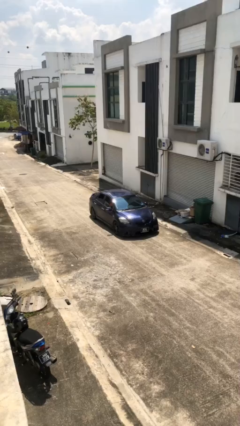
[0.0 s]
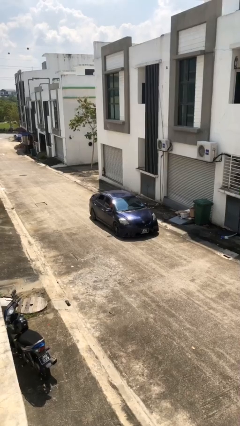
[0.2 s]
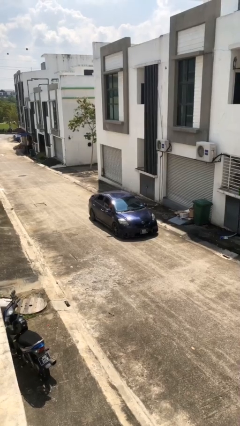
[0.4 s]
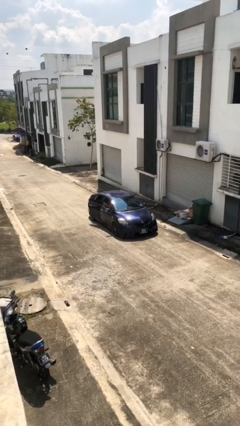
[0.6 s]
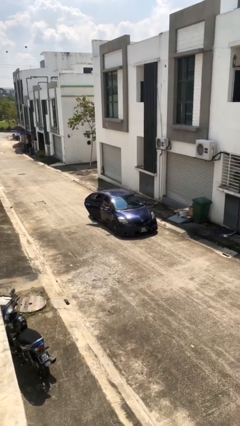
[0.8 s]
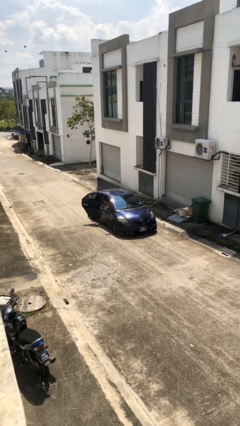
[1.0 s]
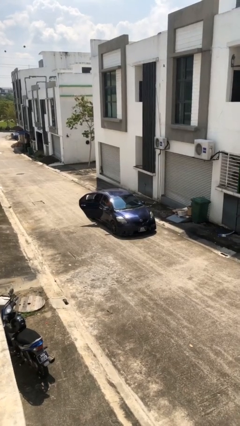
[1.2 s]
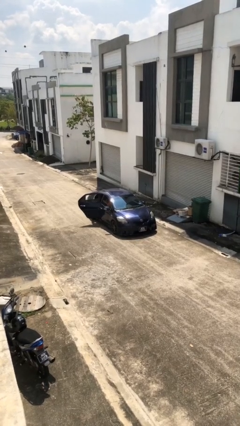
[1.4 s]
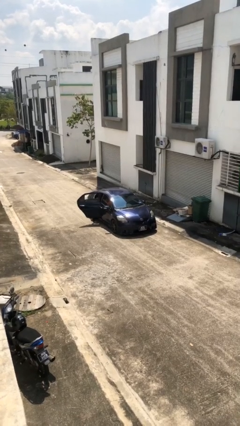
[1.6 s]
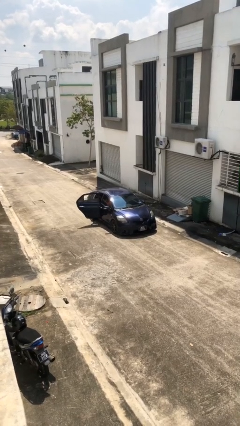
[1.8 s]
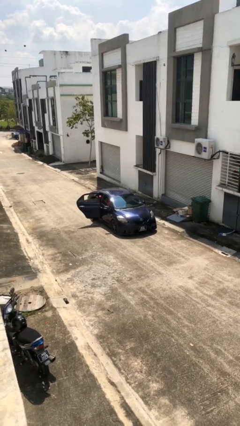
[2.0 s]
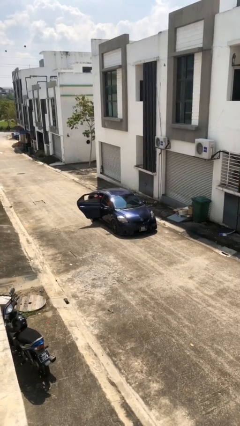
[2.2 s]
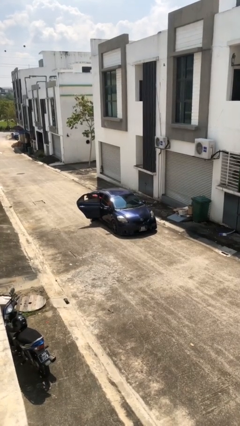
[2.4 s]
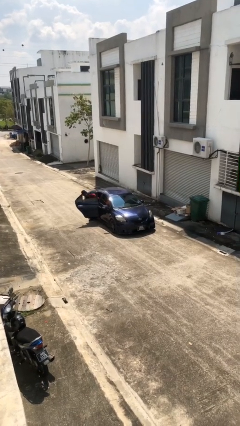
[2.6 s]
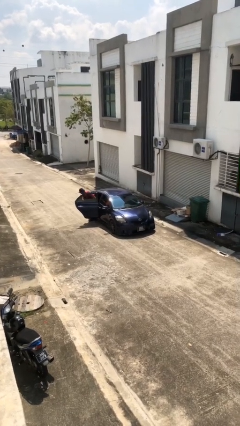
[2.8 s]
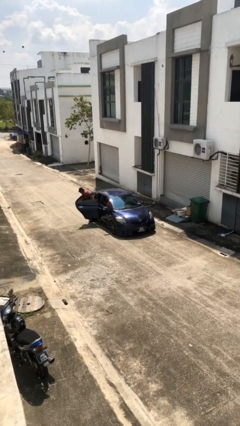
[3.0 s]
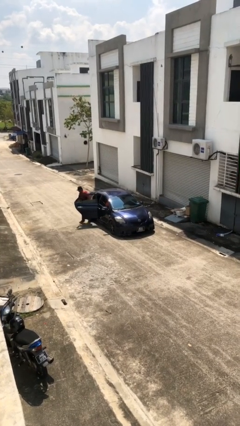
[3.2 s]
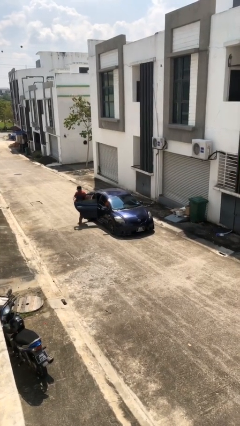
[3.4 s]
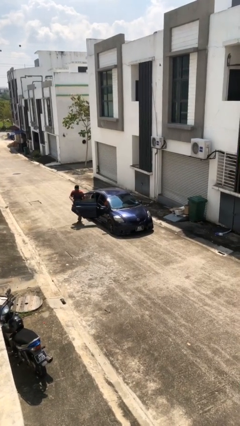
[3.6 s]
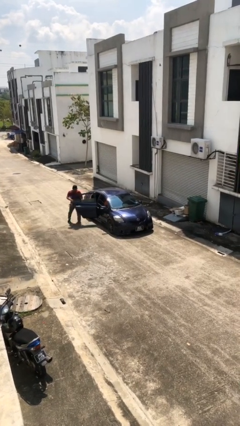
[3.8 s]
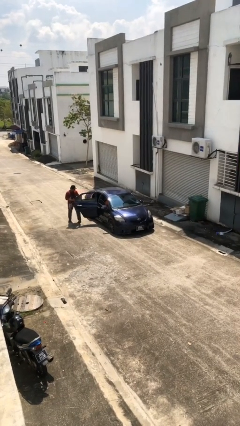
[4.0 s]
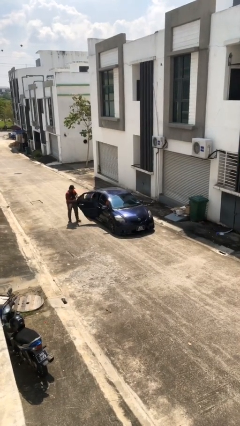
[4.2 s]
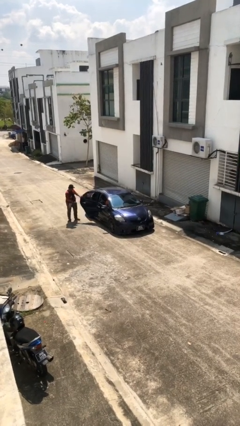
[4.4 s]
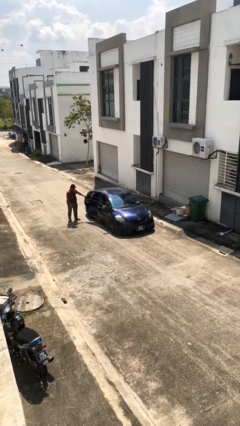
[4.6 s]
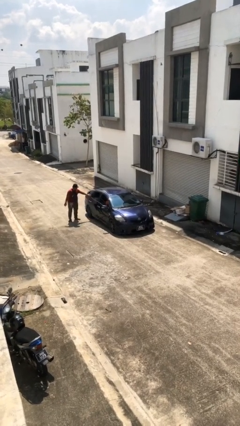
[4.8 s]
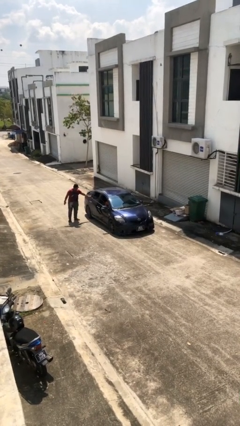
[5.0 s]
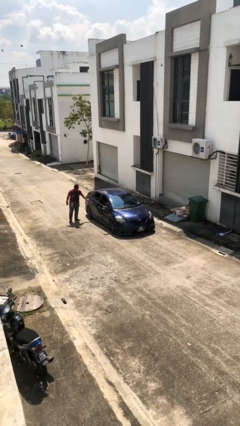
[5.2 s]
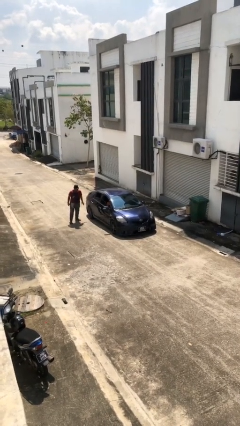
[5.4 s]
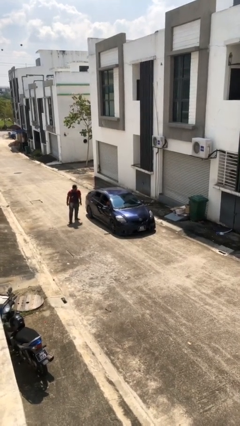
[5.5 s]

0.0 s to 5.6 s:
car drops off person

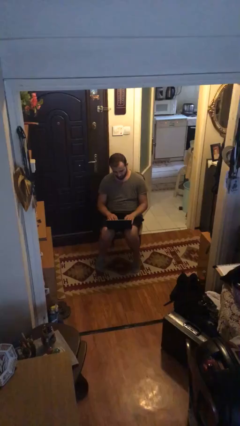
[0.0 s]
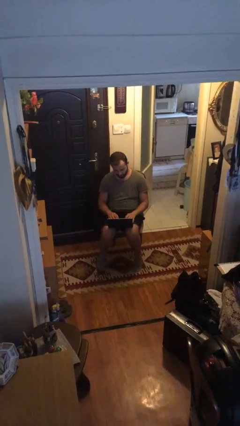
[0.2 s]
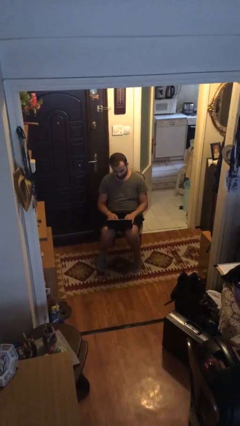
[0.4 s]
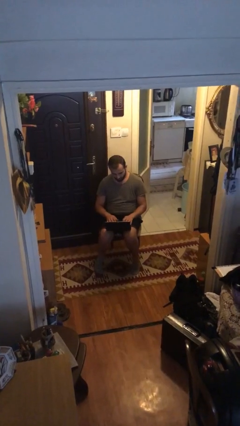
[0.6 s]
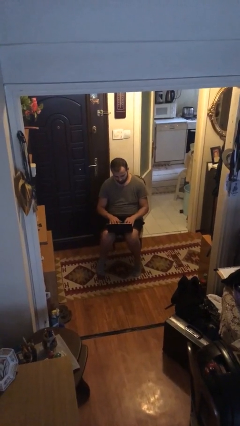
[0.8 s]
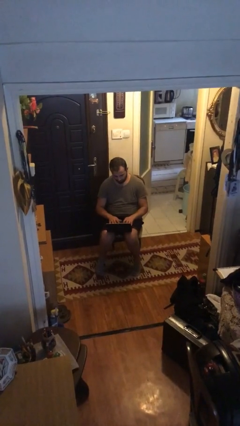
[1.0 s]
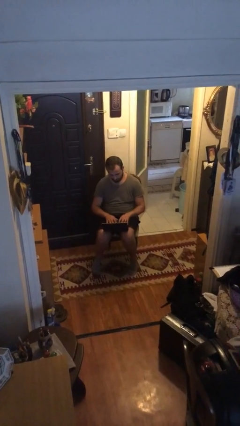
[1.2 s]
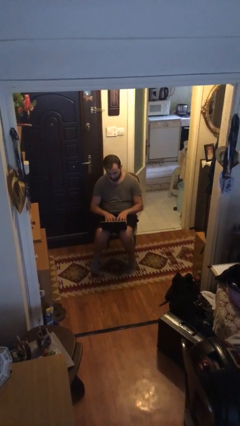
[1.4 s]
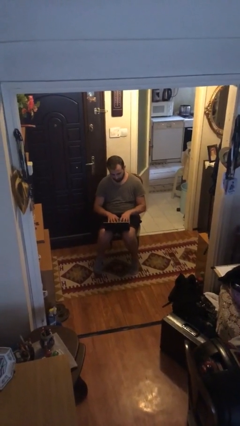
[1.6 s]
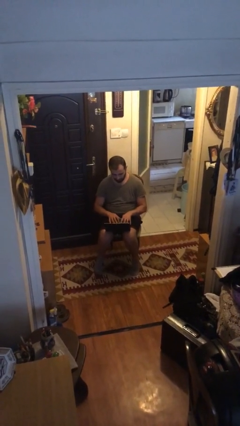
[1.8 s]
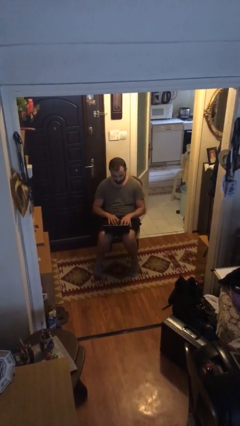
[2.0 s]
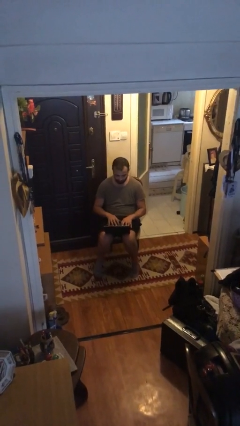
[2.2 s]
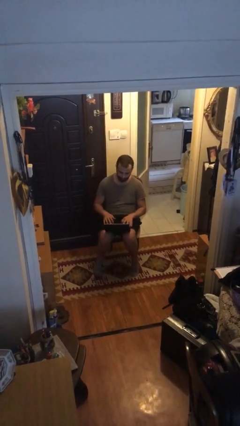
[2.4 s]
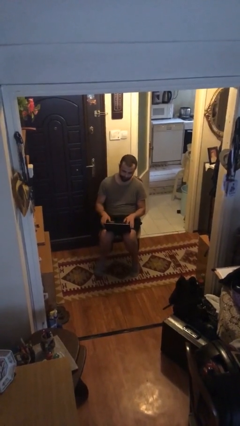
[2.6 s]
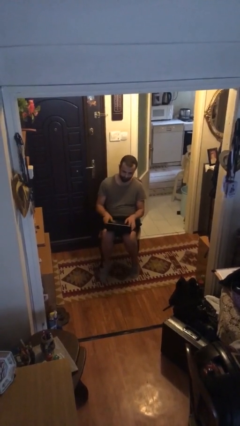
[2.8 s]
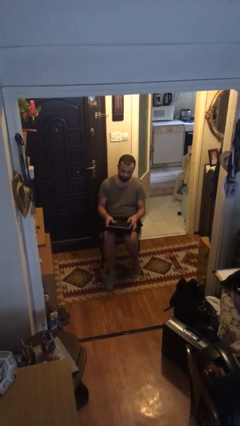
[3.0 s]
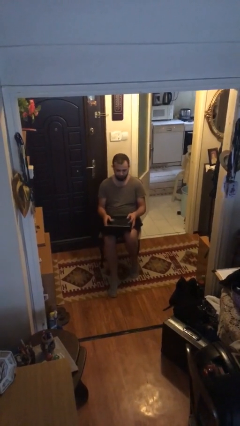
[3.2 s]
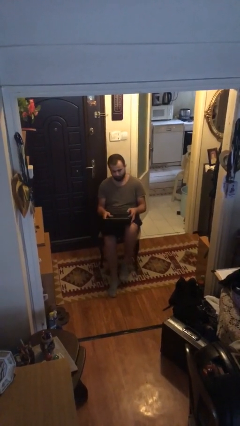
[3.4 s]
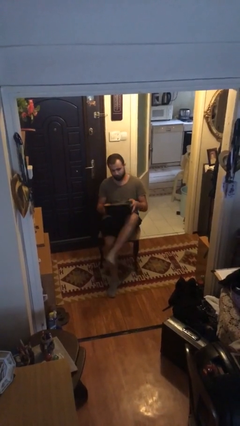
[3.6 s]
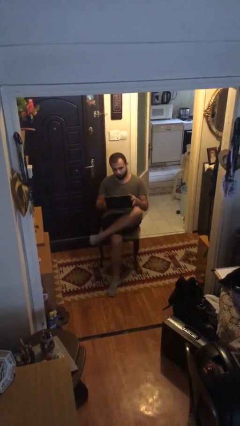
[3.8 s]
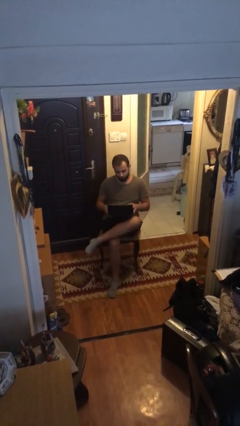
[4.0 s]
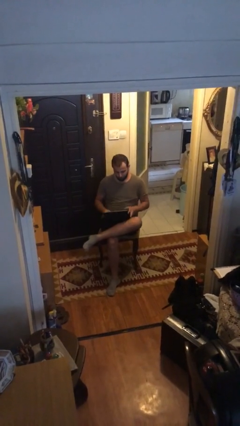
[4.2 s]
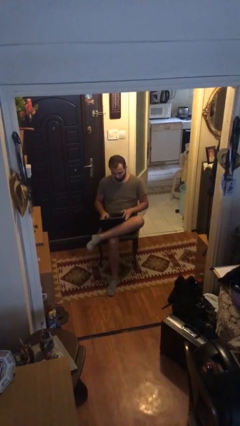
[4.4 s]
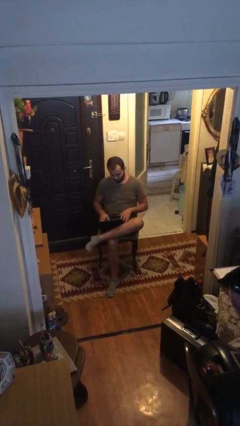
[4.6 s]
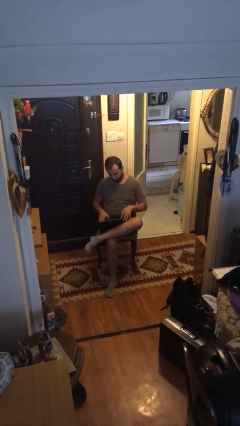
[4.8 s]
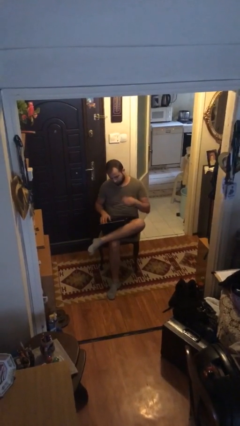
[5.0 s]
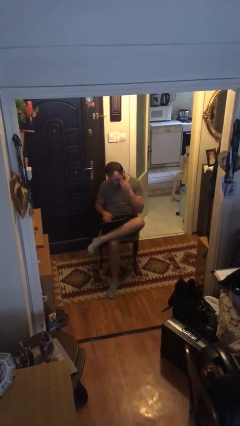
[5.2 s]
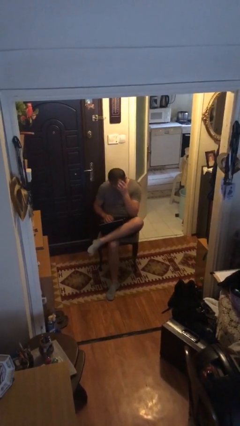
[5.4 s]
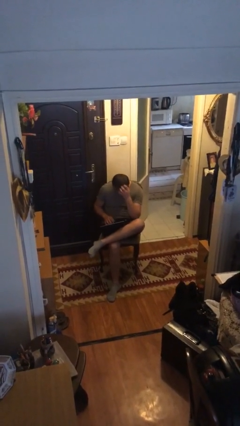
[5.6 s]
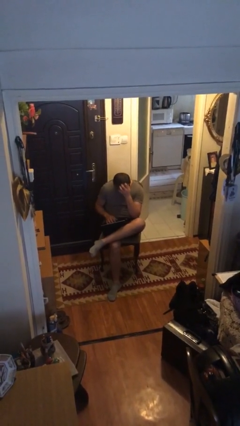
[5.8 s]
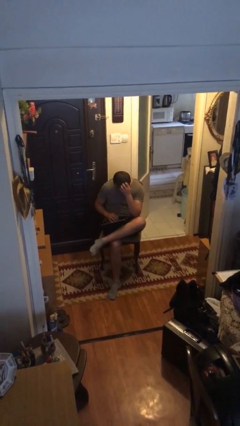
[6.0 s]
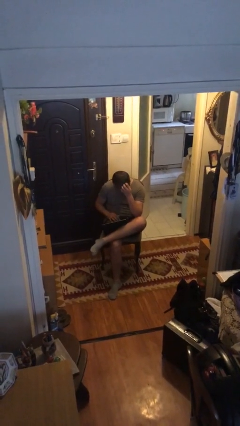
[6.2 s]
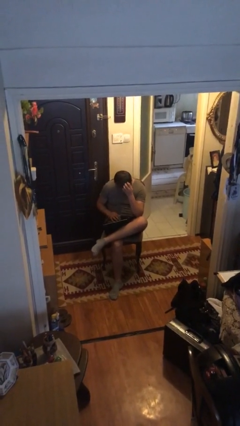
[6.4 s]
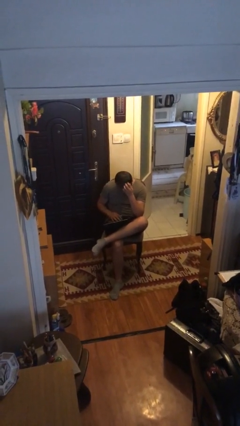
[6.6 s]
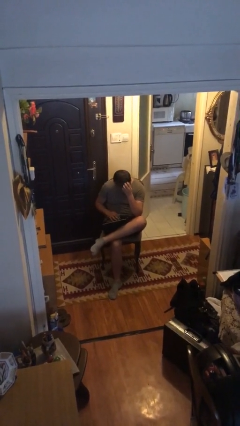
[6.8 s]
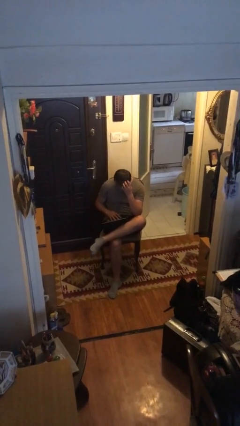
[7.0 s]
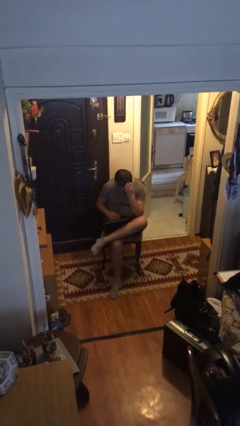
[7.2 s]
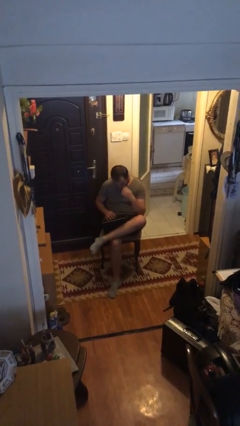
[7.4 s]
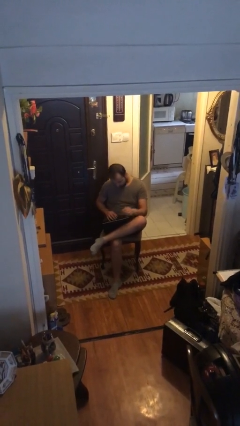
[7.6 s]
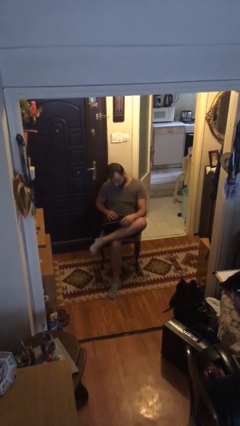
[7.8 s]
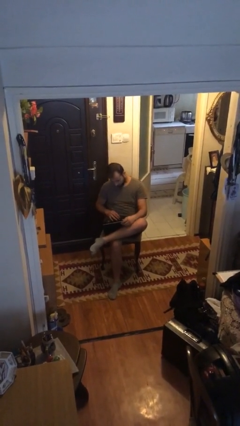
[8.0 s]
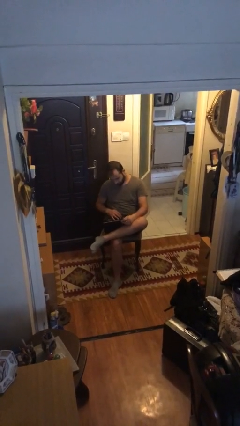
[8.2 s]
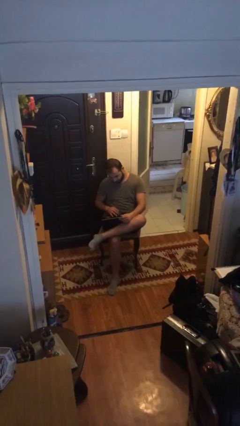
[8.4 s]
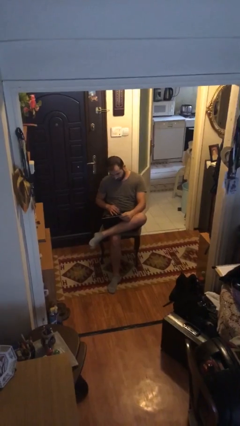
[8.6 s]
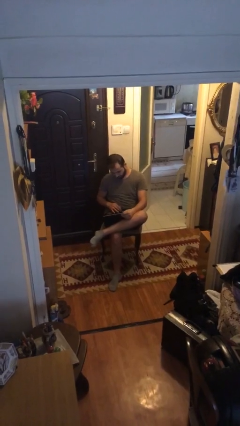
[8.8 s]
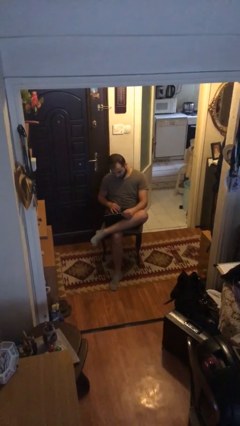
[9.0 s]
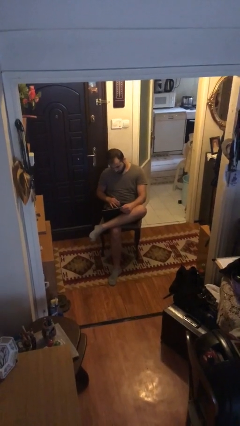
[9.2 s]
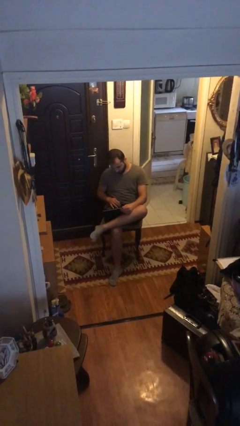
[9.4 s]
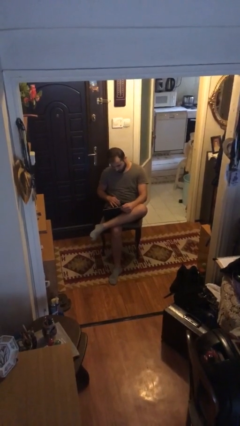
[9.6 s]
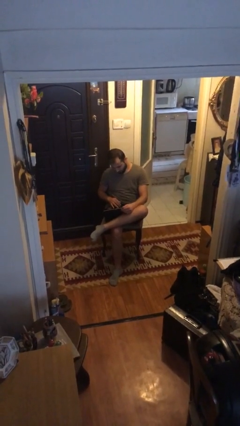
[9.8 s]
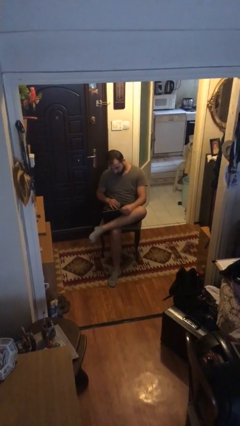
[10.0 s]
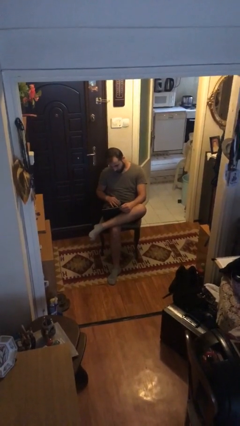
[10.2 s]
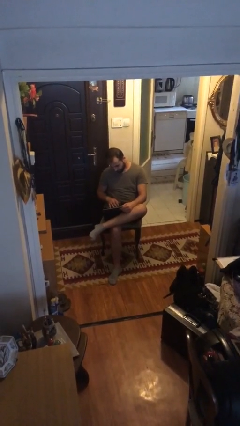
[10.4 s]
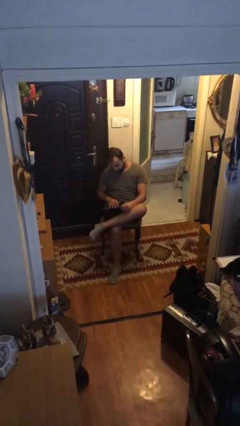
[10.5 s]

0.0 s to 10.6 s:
person interacts with laptop

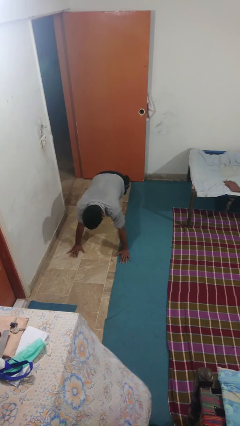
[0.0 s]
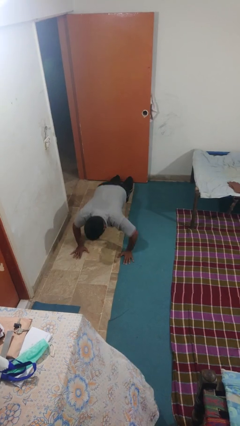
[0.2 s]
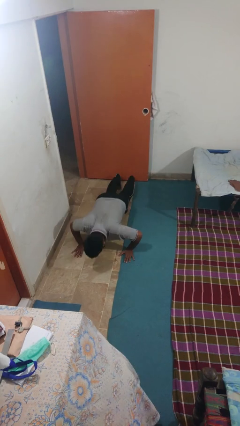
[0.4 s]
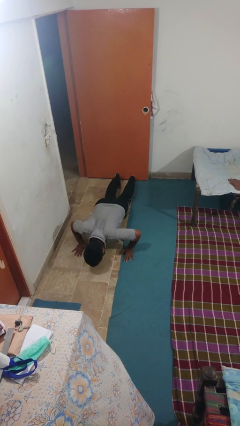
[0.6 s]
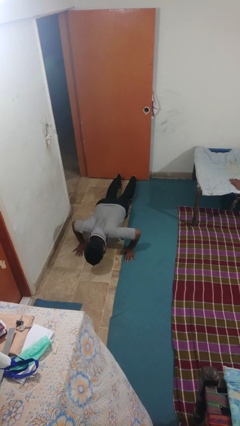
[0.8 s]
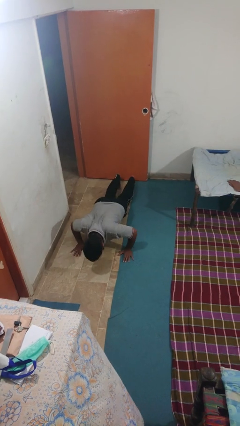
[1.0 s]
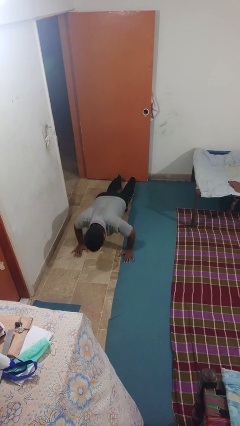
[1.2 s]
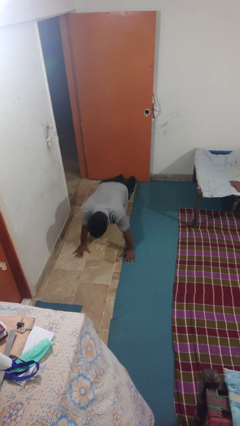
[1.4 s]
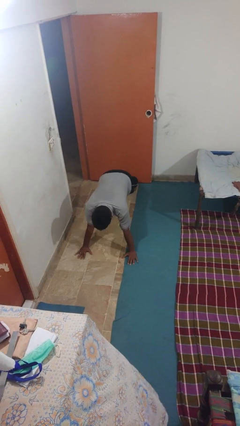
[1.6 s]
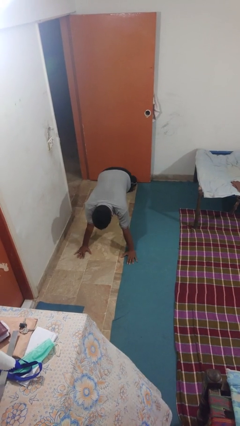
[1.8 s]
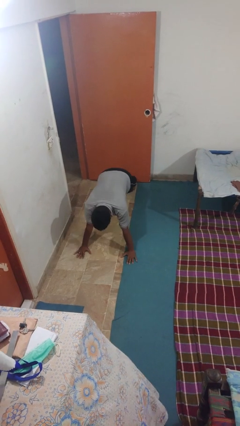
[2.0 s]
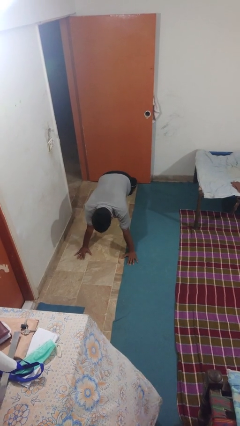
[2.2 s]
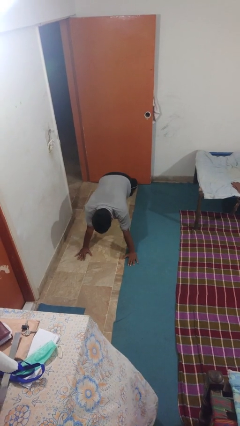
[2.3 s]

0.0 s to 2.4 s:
person exercises with pushup
